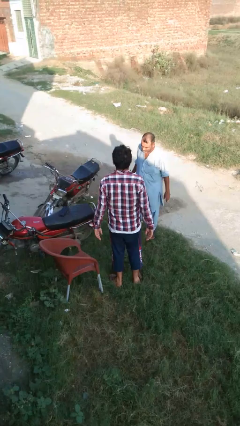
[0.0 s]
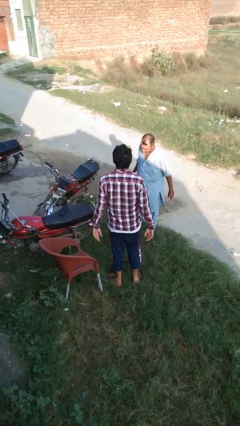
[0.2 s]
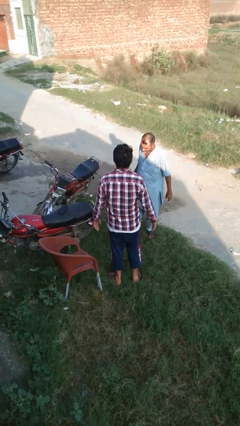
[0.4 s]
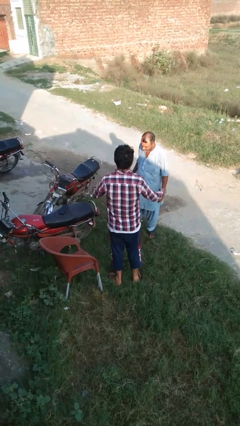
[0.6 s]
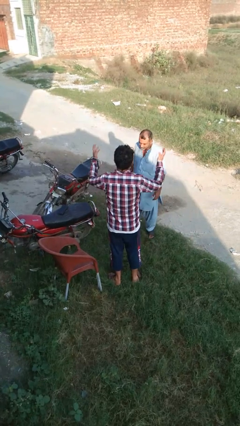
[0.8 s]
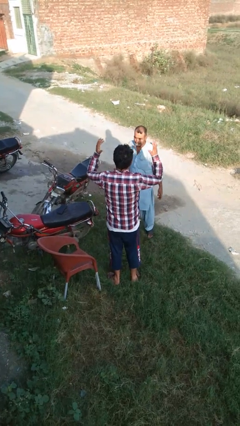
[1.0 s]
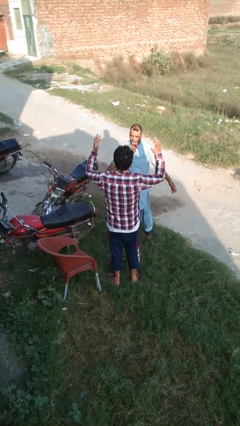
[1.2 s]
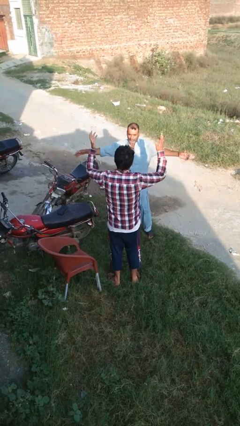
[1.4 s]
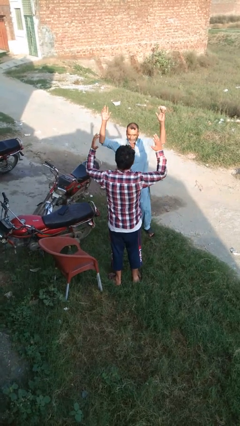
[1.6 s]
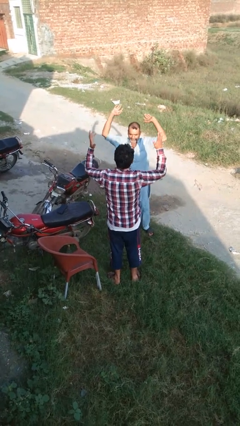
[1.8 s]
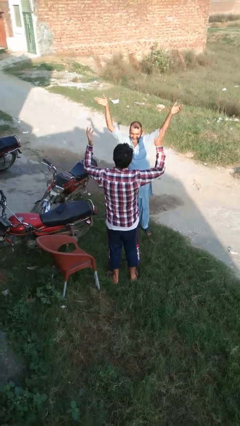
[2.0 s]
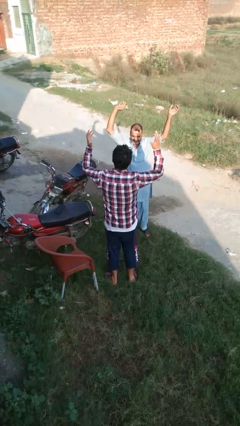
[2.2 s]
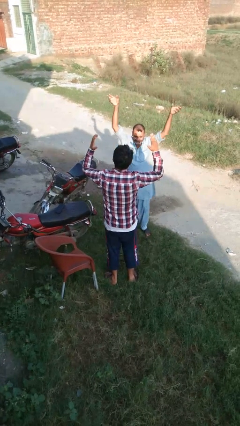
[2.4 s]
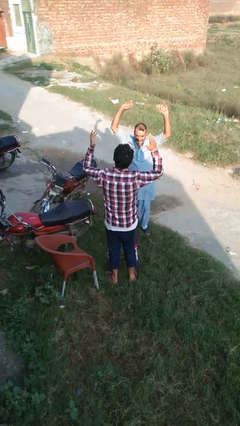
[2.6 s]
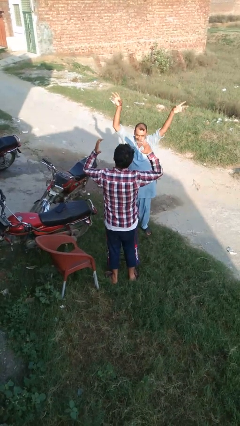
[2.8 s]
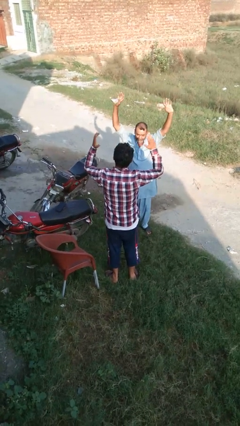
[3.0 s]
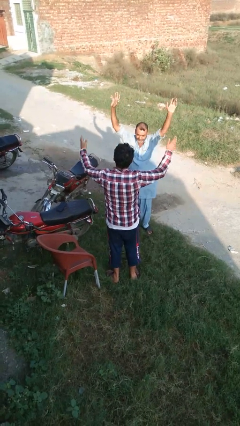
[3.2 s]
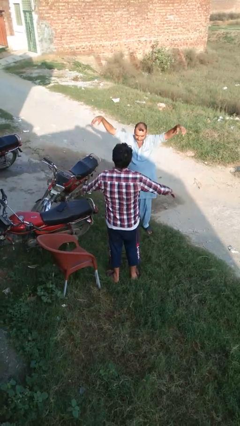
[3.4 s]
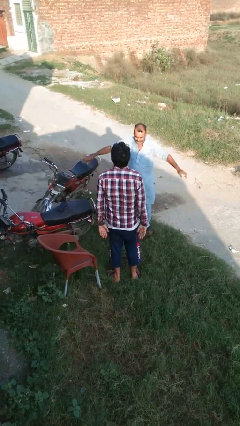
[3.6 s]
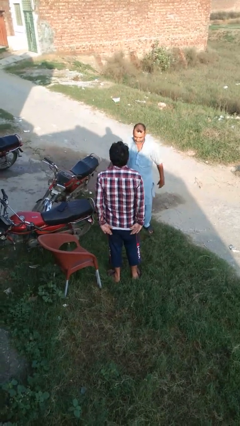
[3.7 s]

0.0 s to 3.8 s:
person laughs with person

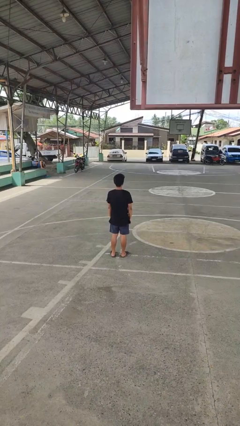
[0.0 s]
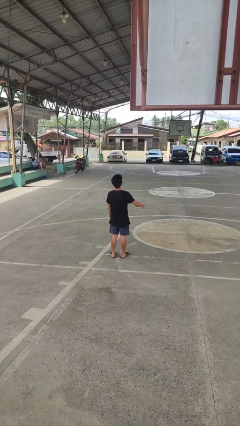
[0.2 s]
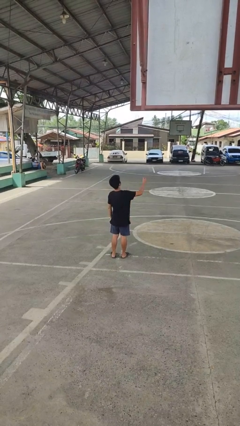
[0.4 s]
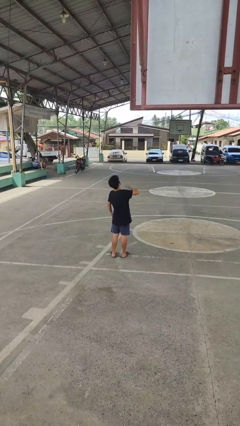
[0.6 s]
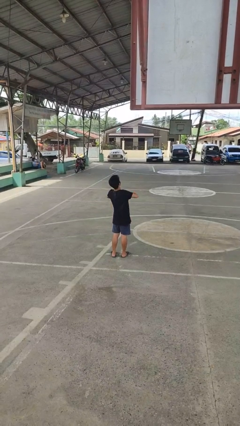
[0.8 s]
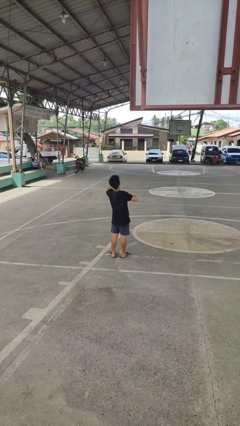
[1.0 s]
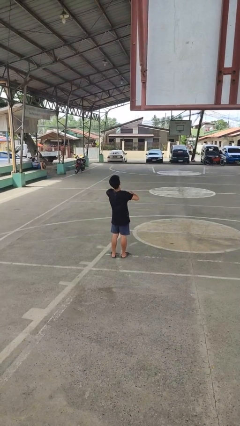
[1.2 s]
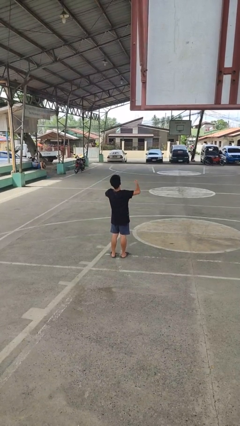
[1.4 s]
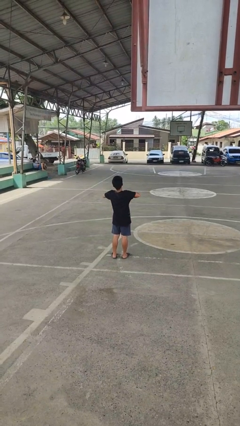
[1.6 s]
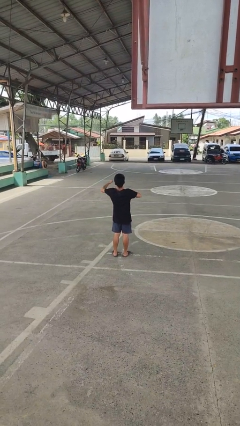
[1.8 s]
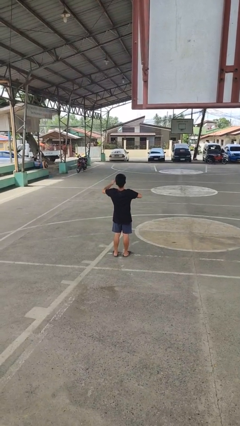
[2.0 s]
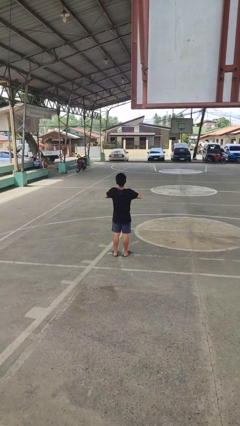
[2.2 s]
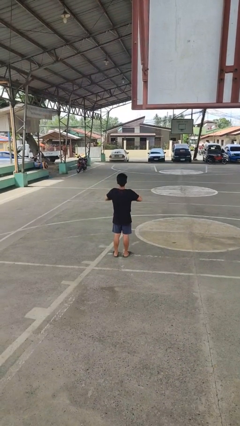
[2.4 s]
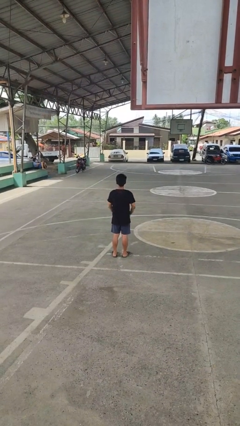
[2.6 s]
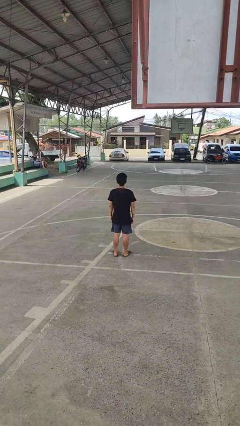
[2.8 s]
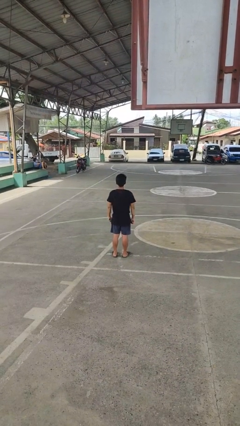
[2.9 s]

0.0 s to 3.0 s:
person drums on chest

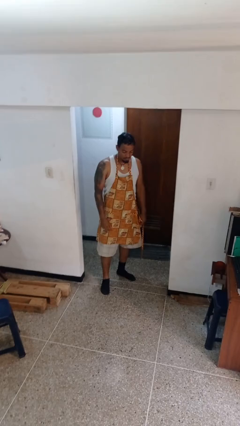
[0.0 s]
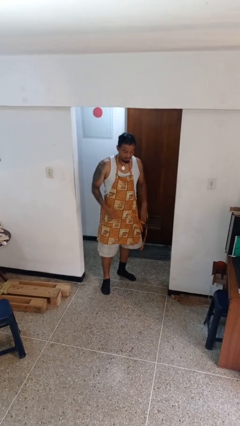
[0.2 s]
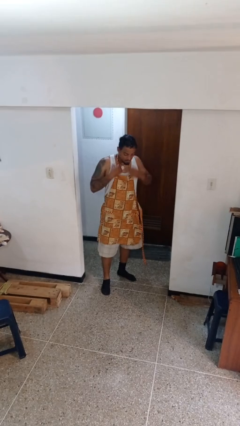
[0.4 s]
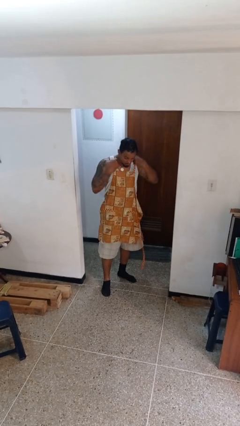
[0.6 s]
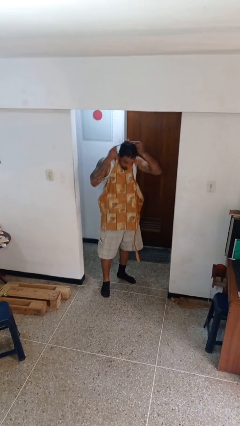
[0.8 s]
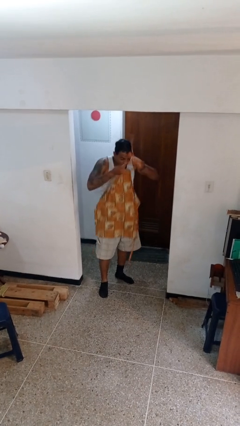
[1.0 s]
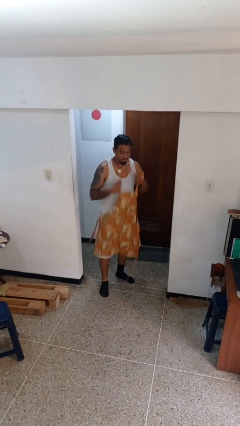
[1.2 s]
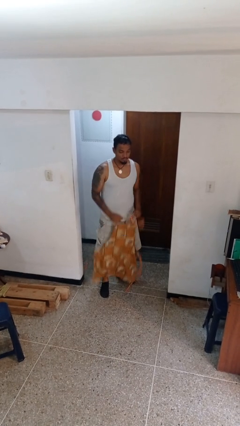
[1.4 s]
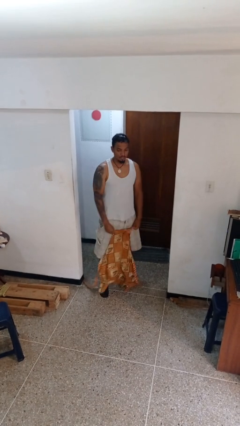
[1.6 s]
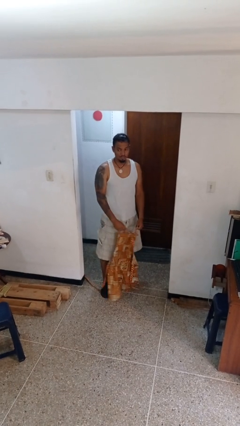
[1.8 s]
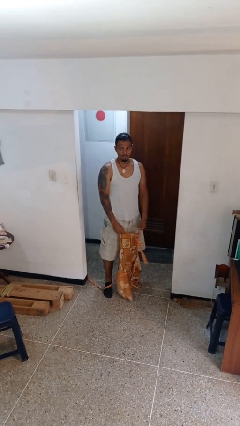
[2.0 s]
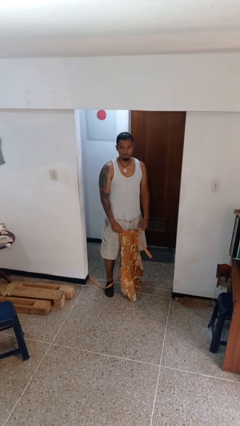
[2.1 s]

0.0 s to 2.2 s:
person takes off apron

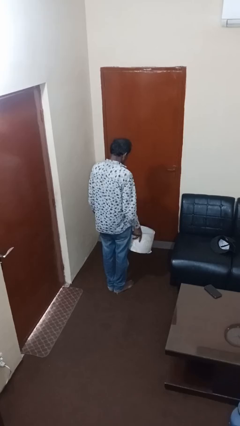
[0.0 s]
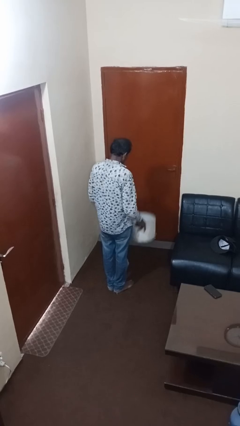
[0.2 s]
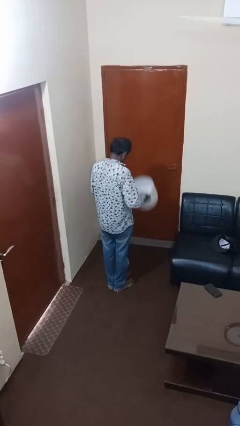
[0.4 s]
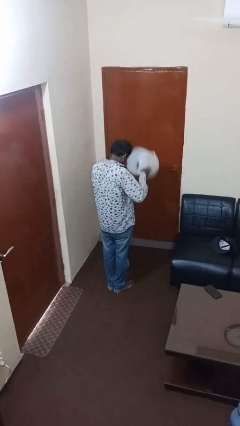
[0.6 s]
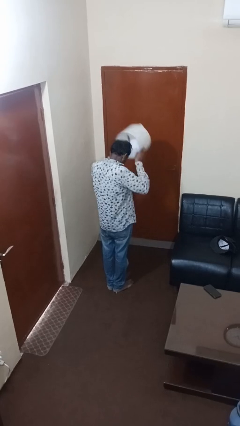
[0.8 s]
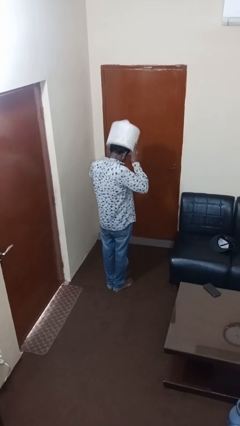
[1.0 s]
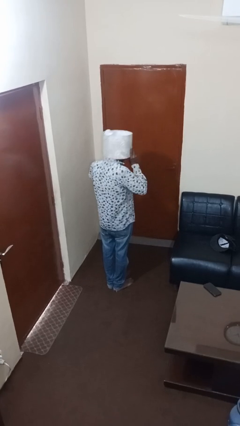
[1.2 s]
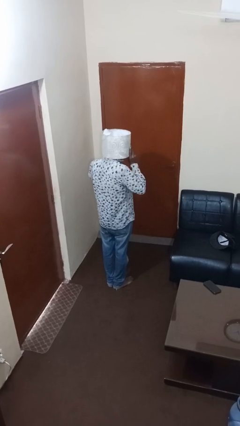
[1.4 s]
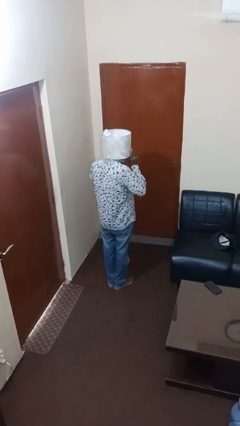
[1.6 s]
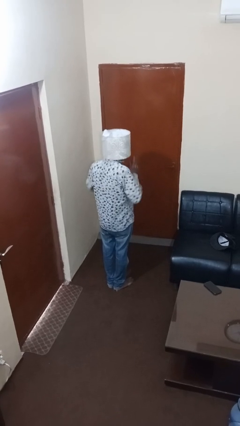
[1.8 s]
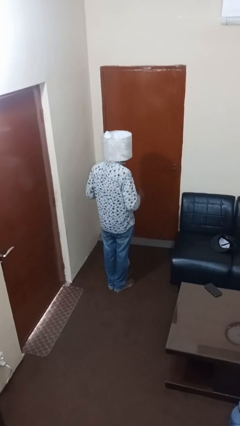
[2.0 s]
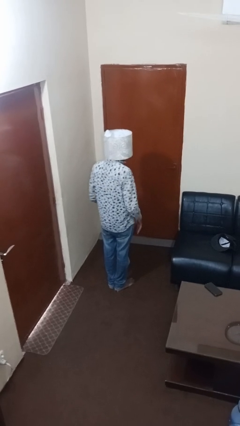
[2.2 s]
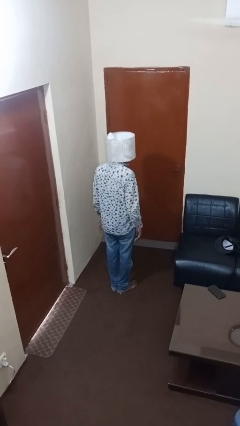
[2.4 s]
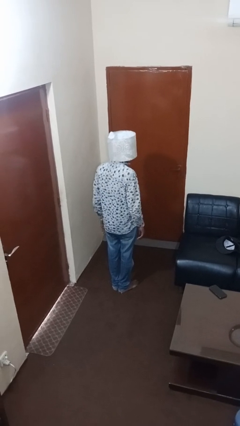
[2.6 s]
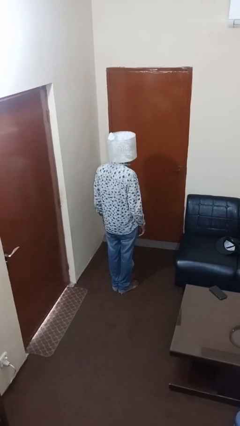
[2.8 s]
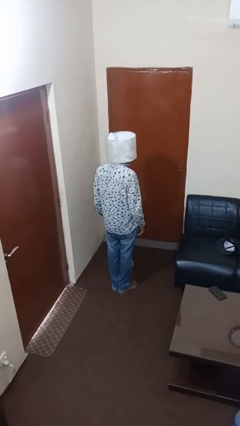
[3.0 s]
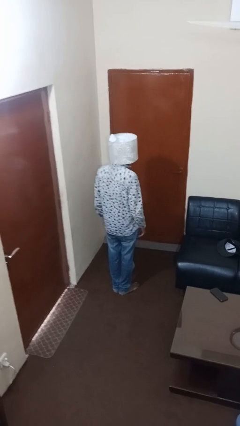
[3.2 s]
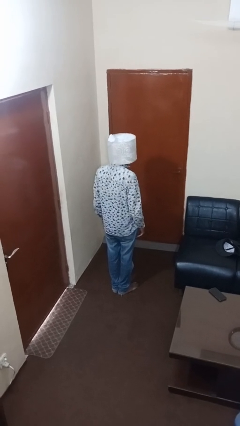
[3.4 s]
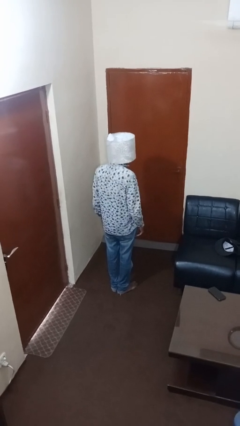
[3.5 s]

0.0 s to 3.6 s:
person puts on hat

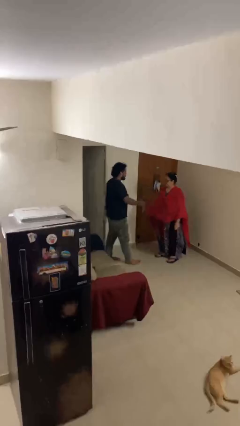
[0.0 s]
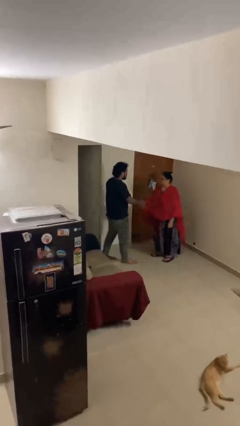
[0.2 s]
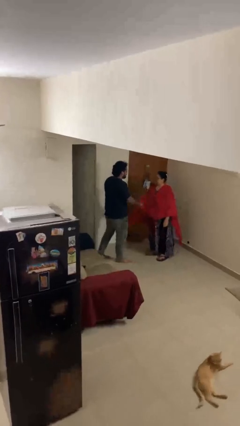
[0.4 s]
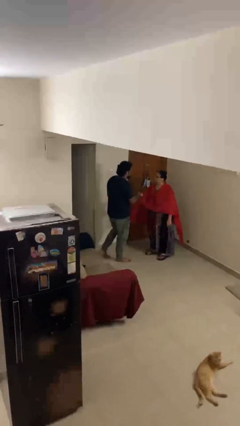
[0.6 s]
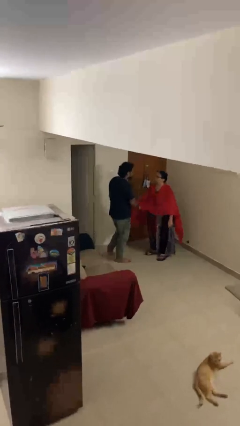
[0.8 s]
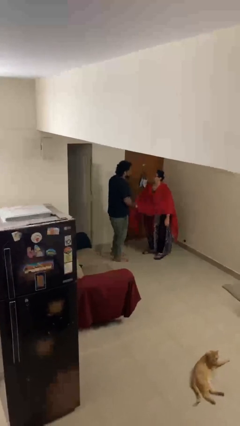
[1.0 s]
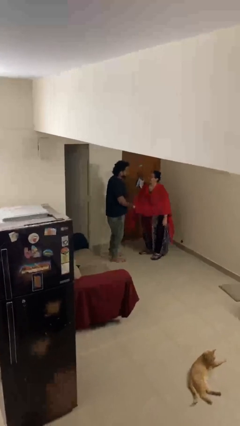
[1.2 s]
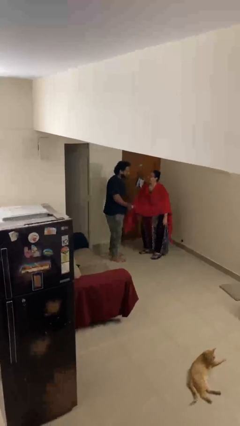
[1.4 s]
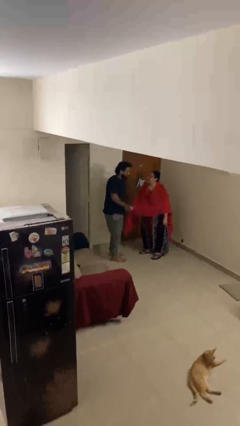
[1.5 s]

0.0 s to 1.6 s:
person shakes hand

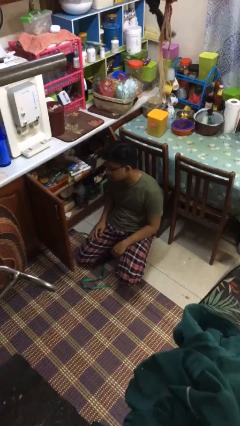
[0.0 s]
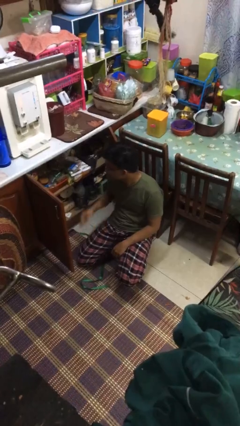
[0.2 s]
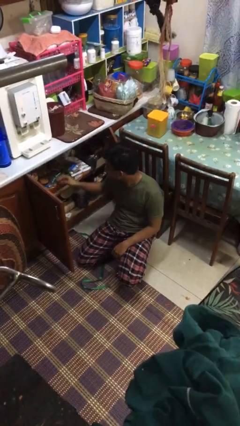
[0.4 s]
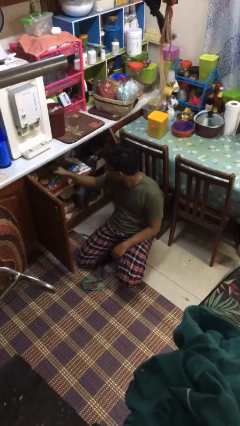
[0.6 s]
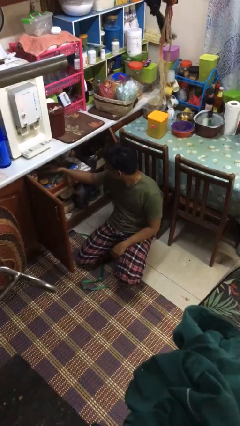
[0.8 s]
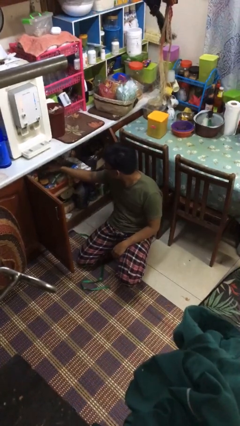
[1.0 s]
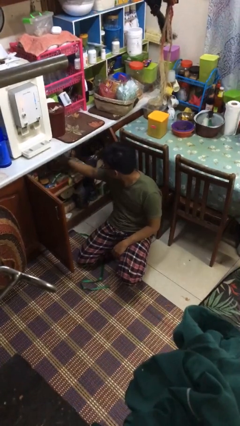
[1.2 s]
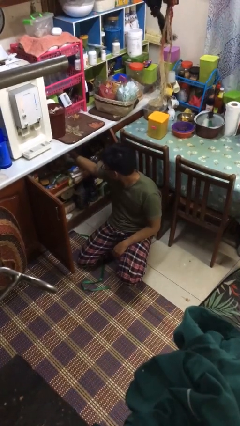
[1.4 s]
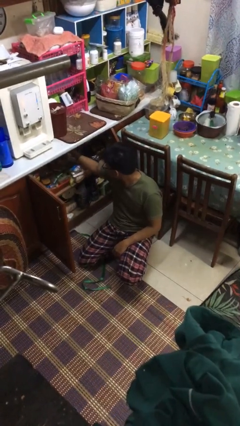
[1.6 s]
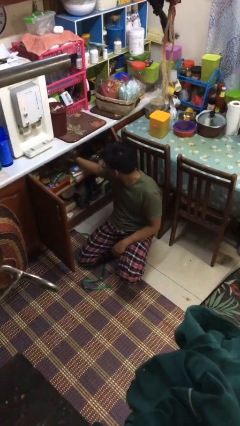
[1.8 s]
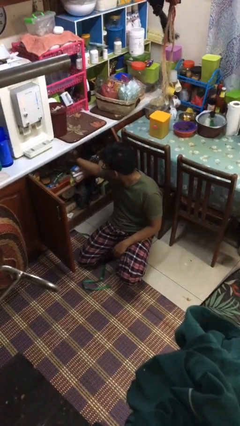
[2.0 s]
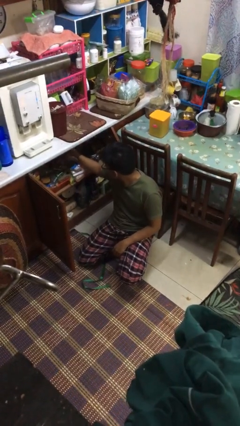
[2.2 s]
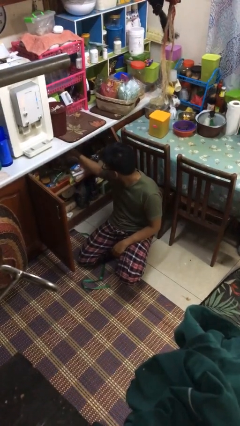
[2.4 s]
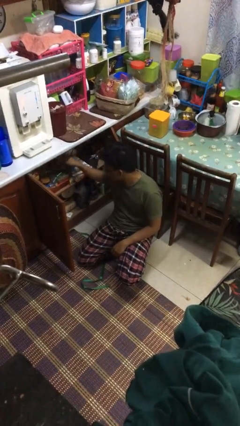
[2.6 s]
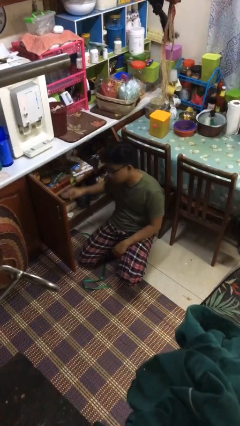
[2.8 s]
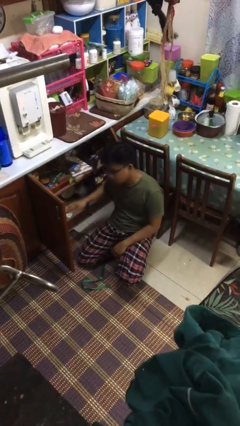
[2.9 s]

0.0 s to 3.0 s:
person searches in kitchen drawer

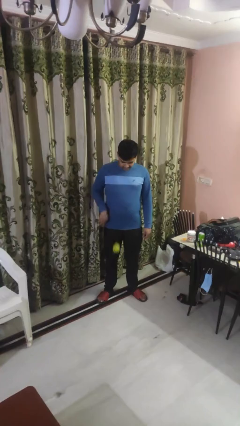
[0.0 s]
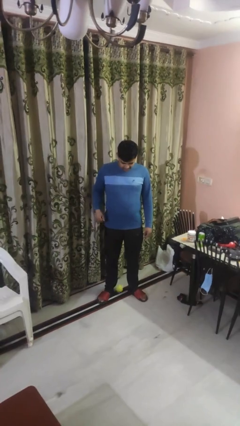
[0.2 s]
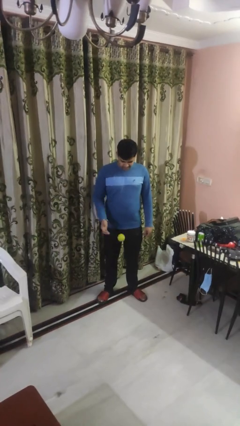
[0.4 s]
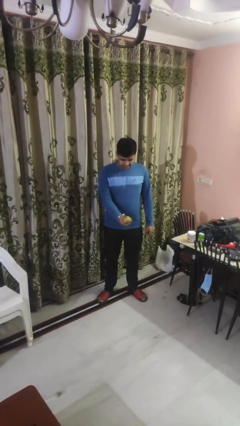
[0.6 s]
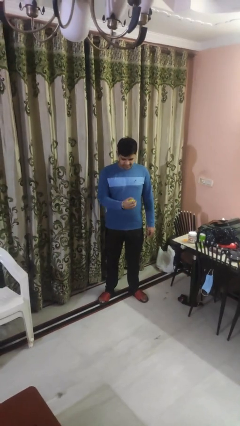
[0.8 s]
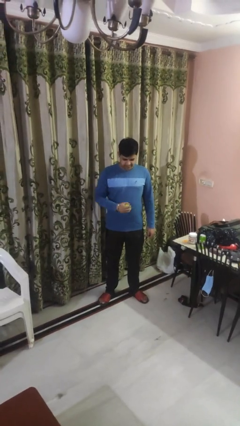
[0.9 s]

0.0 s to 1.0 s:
person bounces ball on floor
